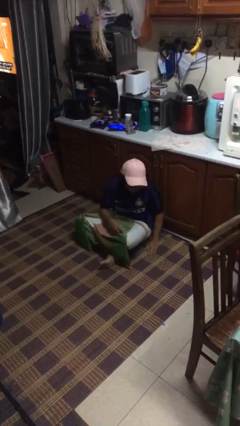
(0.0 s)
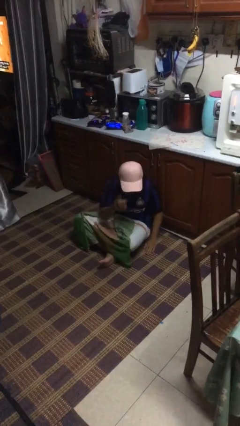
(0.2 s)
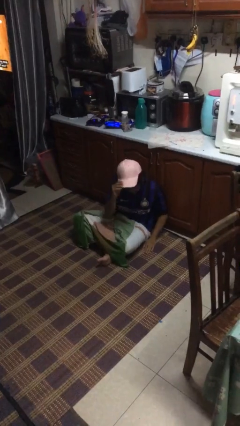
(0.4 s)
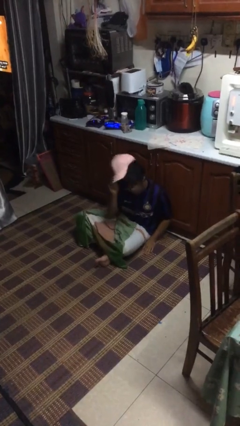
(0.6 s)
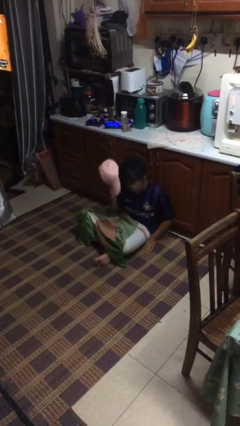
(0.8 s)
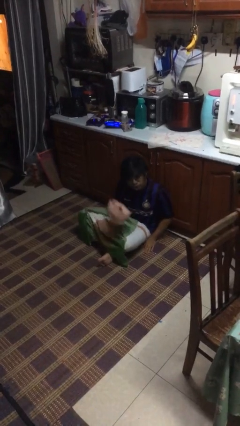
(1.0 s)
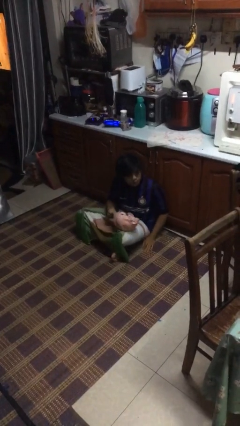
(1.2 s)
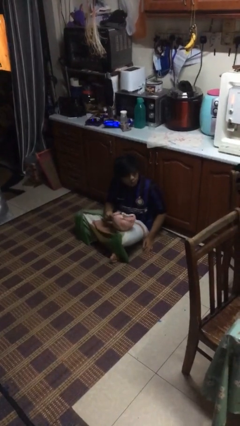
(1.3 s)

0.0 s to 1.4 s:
person takes off hat

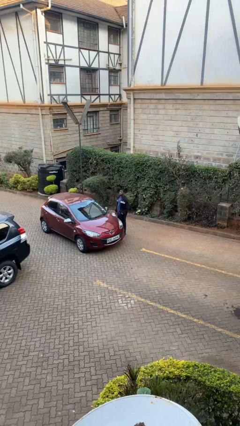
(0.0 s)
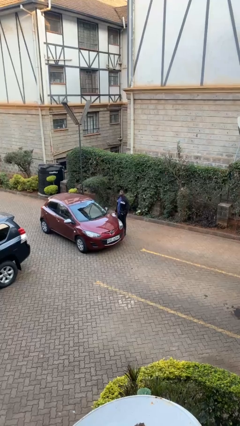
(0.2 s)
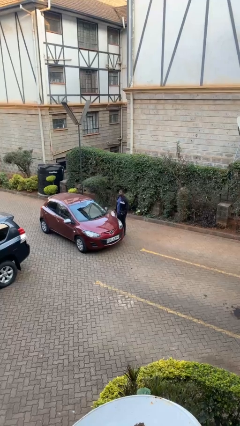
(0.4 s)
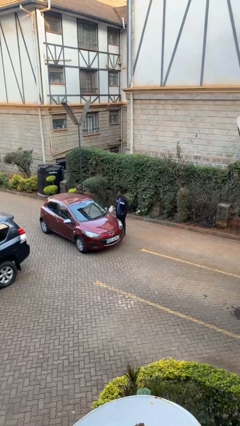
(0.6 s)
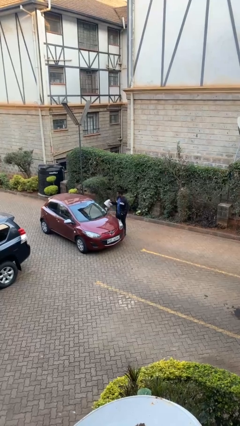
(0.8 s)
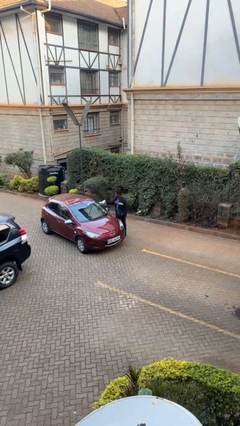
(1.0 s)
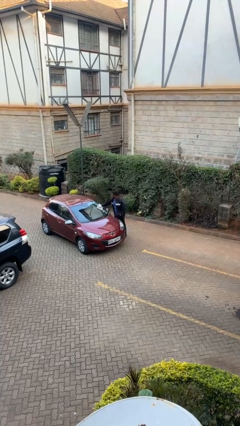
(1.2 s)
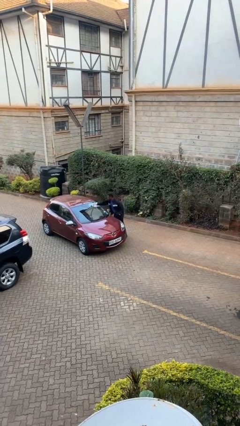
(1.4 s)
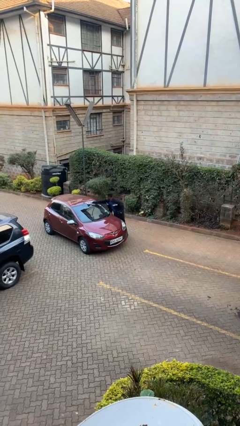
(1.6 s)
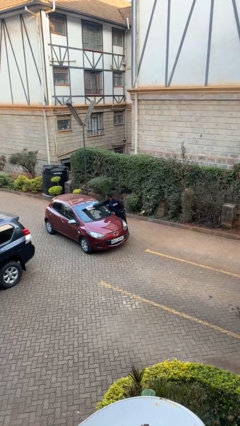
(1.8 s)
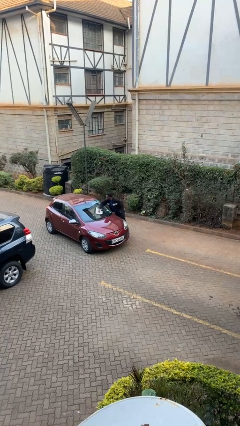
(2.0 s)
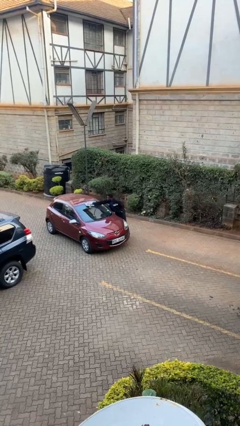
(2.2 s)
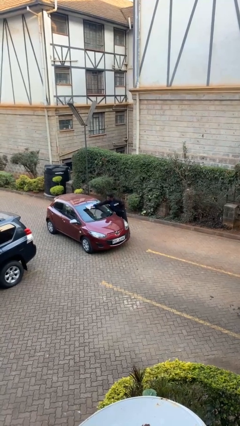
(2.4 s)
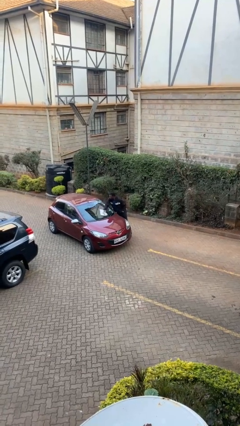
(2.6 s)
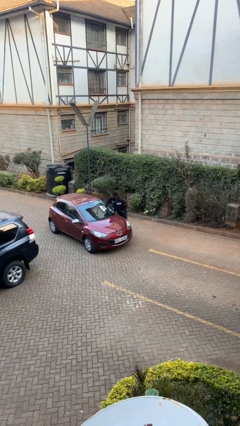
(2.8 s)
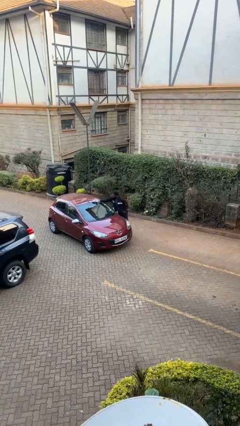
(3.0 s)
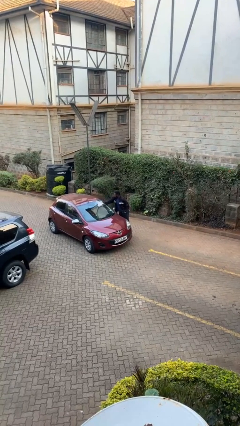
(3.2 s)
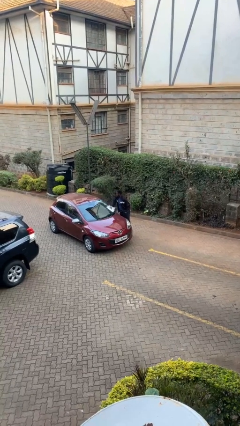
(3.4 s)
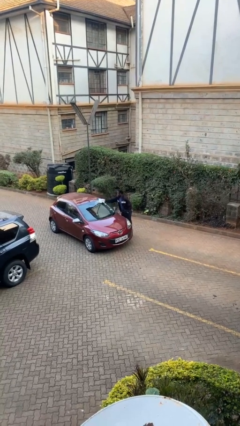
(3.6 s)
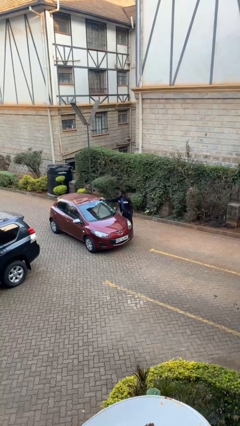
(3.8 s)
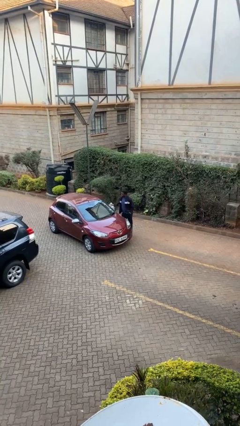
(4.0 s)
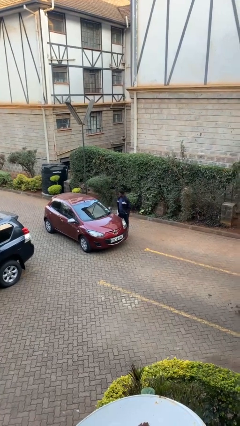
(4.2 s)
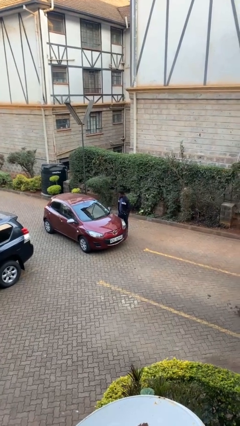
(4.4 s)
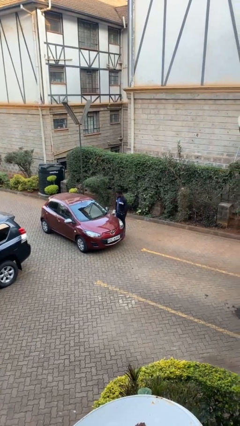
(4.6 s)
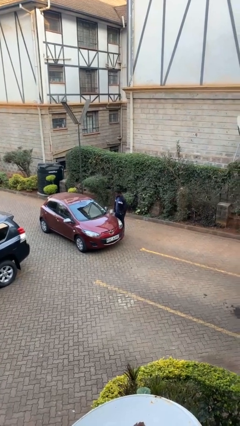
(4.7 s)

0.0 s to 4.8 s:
person polishes car with rag

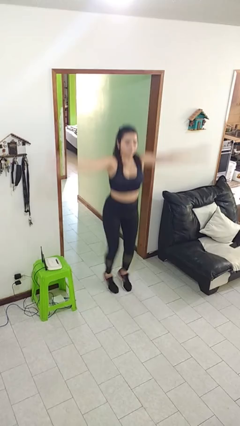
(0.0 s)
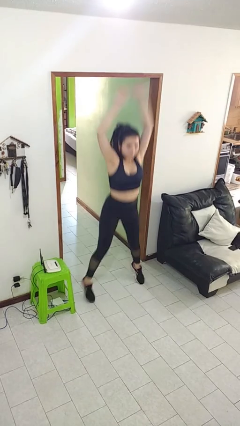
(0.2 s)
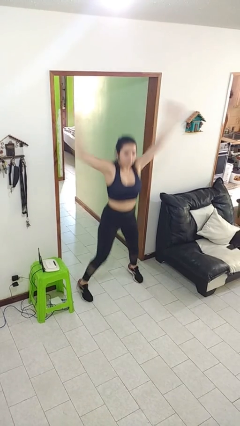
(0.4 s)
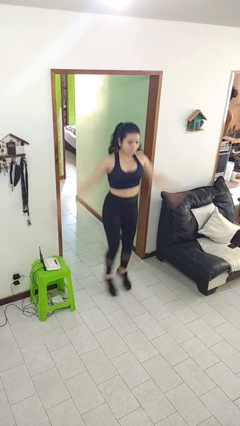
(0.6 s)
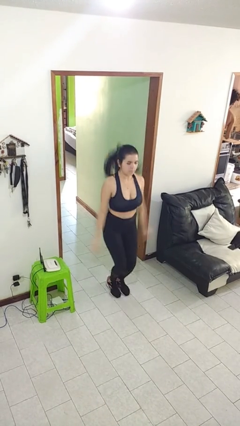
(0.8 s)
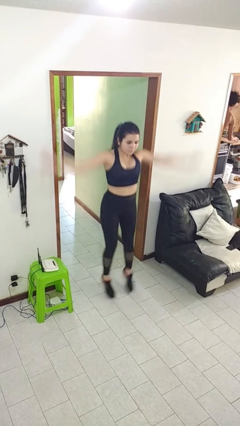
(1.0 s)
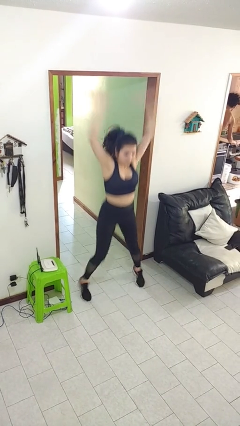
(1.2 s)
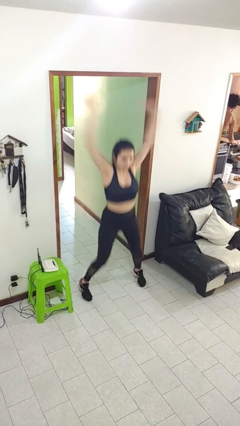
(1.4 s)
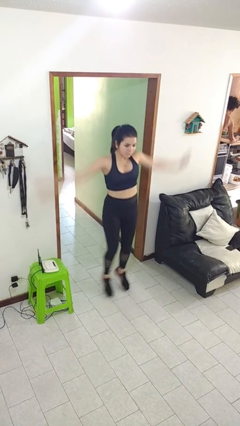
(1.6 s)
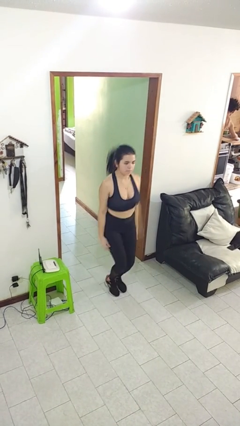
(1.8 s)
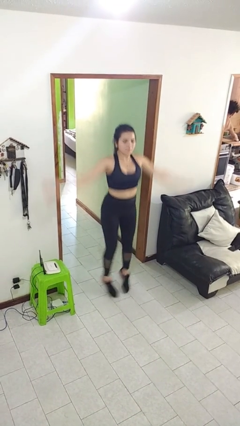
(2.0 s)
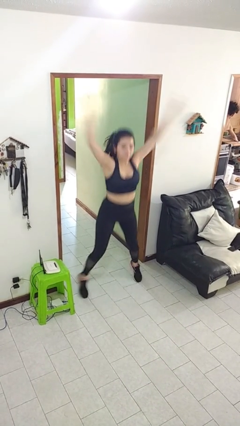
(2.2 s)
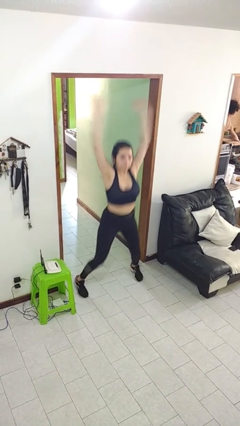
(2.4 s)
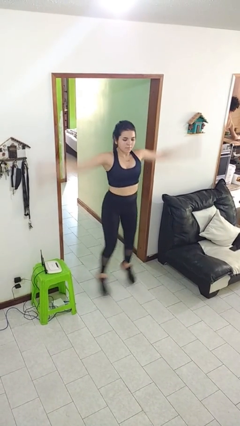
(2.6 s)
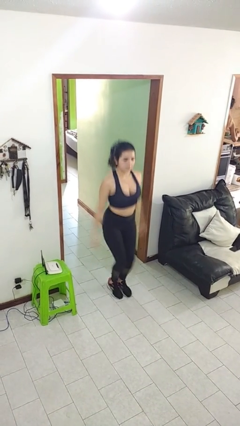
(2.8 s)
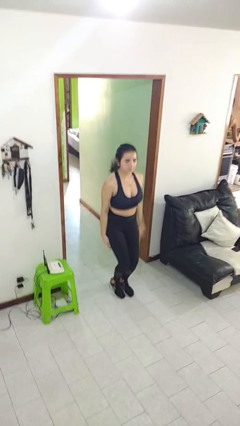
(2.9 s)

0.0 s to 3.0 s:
person exercises with jumping jacks

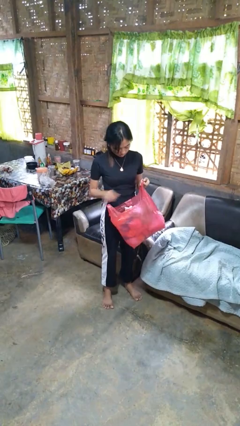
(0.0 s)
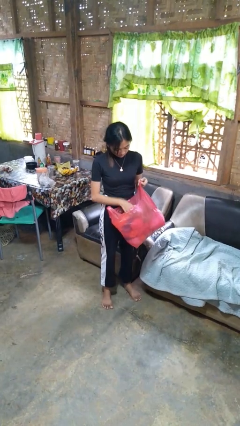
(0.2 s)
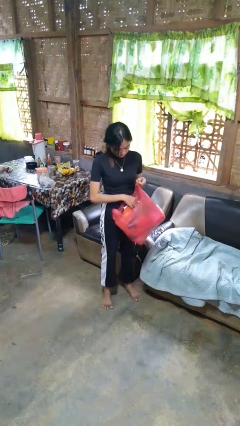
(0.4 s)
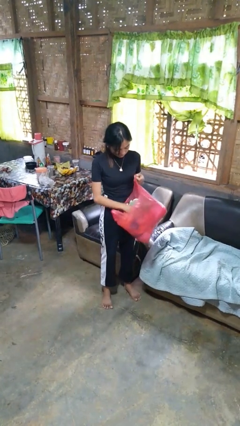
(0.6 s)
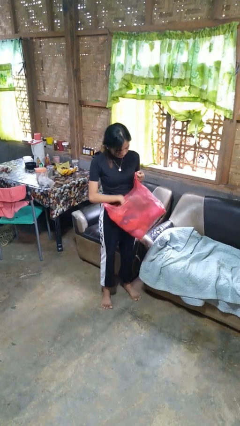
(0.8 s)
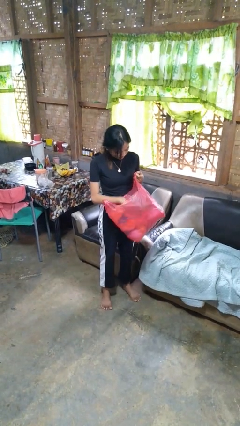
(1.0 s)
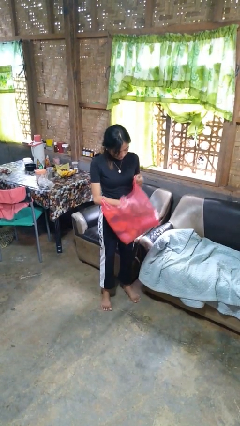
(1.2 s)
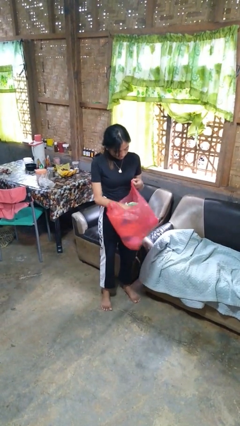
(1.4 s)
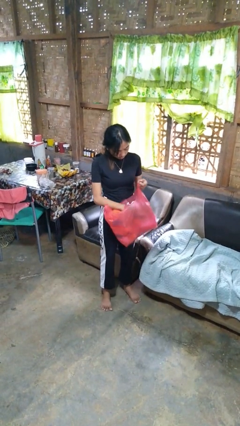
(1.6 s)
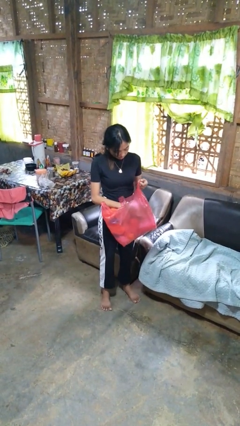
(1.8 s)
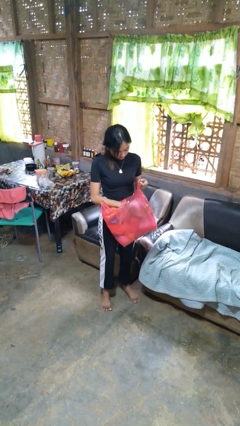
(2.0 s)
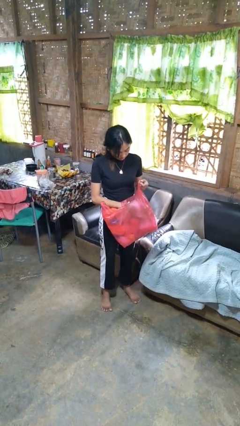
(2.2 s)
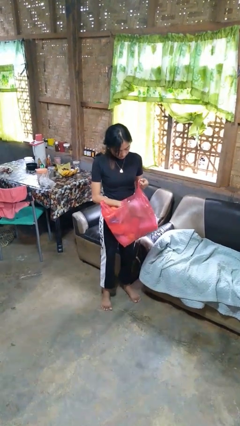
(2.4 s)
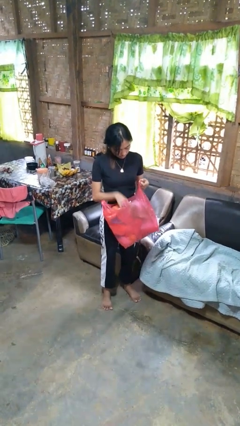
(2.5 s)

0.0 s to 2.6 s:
person searches in bag

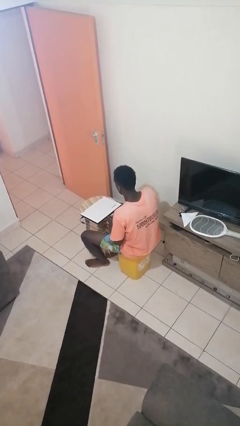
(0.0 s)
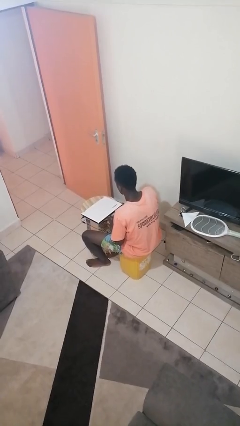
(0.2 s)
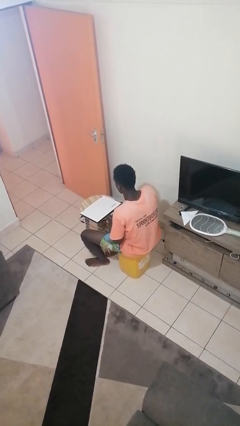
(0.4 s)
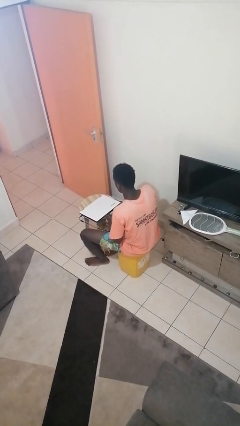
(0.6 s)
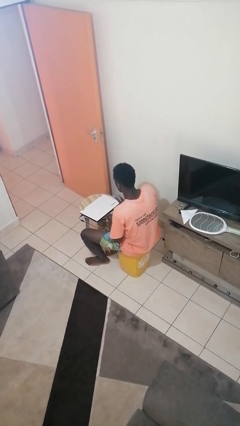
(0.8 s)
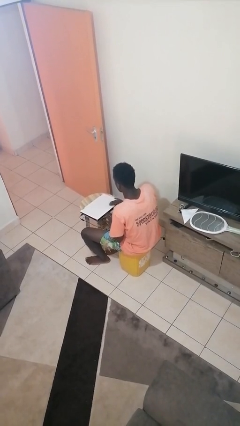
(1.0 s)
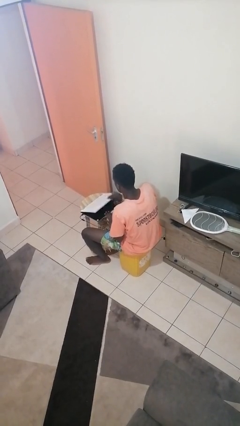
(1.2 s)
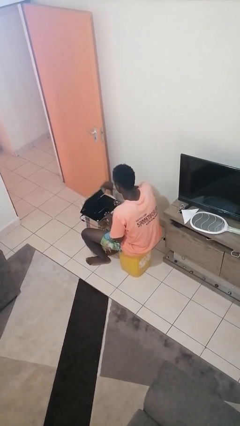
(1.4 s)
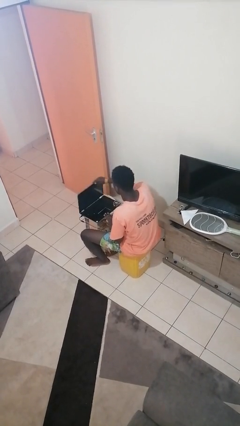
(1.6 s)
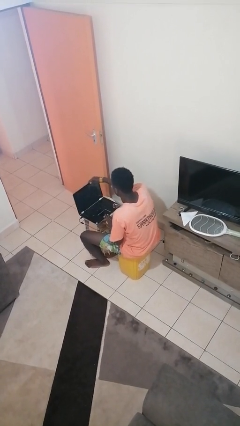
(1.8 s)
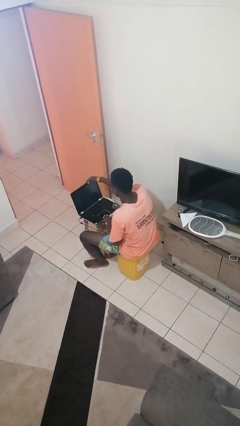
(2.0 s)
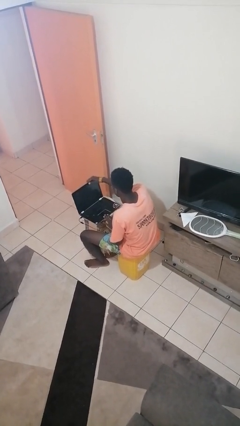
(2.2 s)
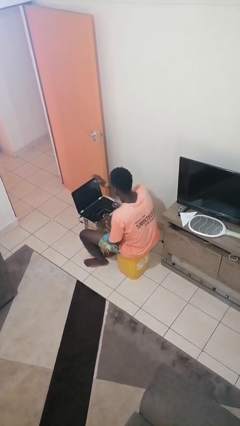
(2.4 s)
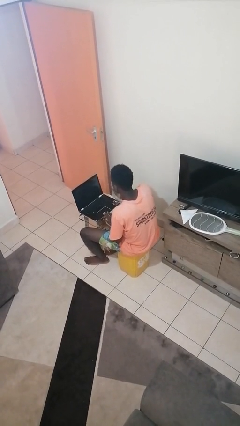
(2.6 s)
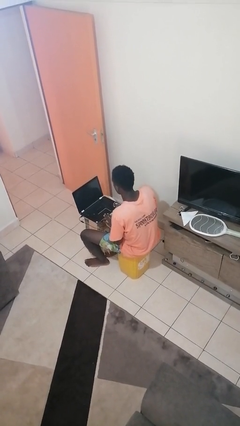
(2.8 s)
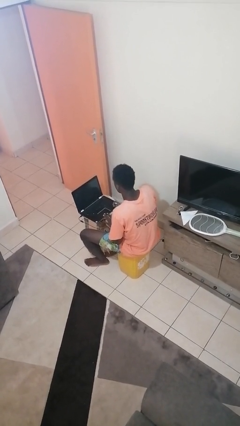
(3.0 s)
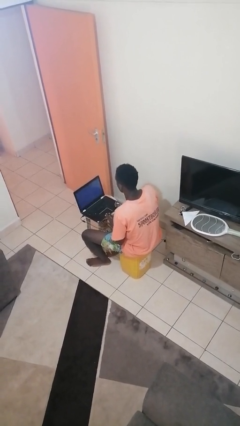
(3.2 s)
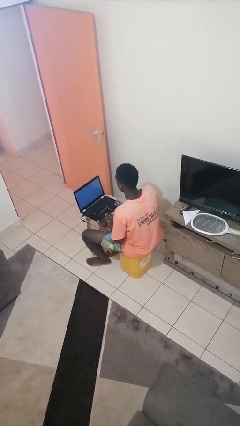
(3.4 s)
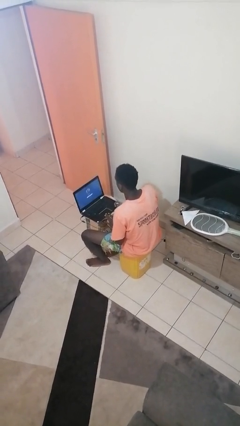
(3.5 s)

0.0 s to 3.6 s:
person opens laptop

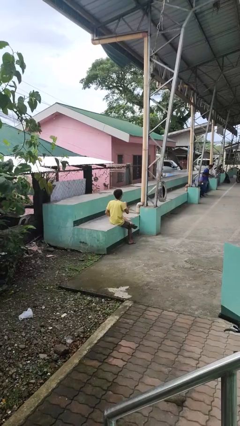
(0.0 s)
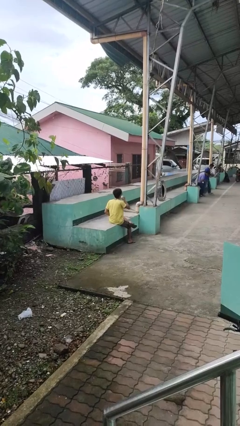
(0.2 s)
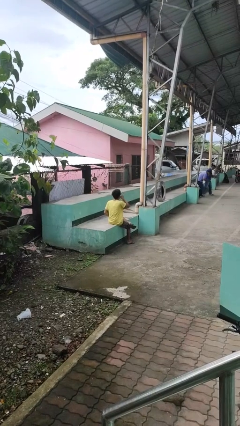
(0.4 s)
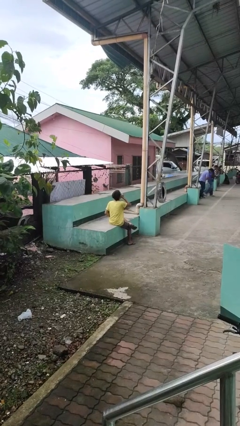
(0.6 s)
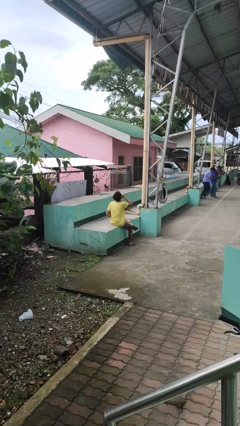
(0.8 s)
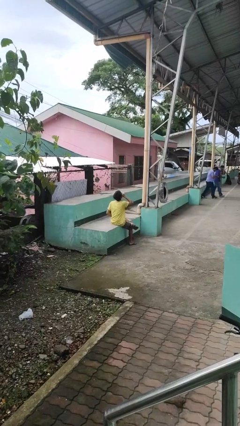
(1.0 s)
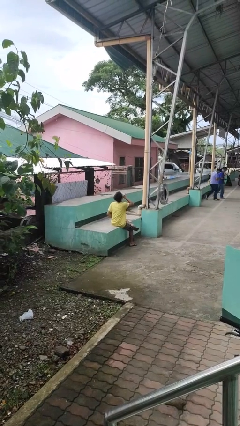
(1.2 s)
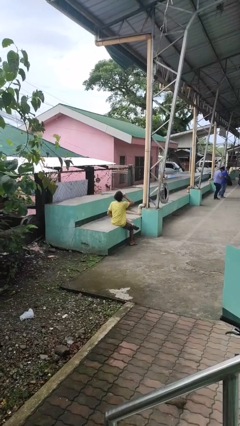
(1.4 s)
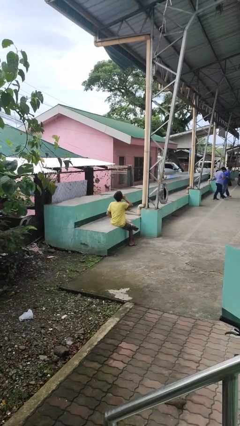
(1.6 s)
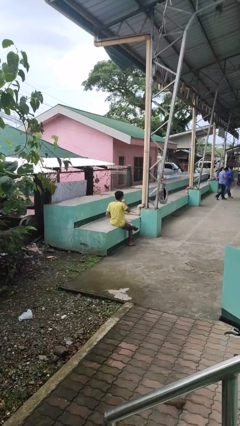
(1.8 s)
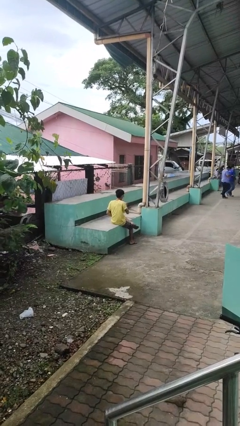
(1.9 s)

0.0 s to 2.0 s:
person drinks from bottle
